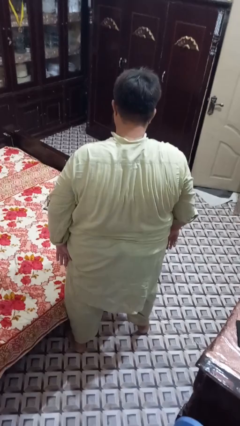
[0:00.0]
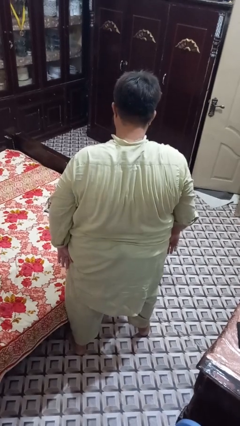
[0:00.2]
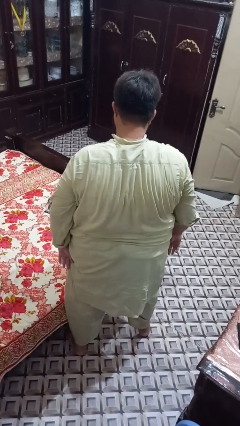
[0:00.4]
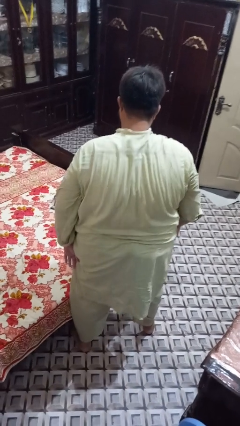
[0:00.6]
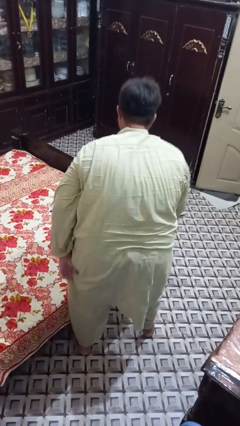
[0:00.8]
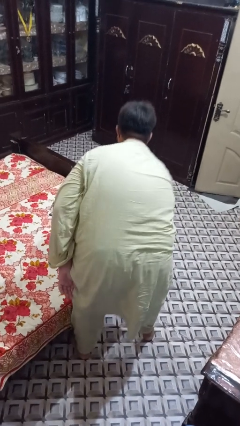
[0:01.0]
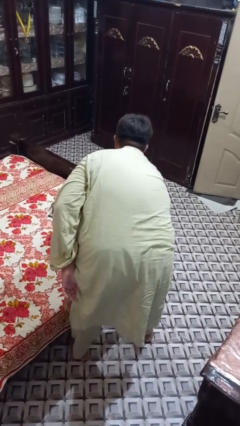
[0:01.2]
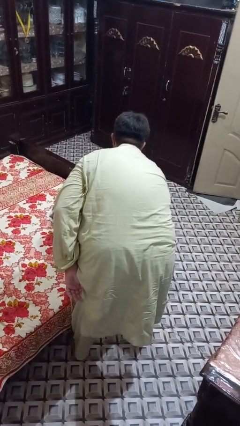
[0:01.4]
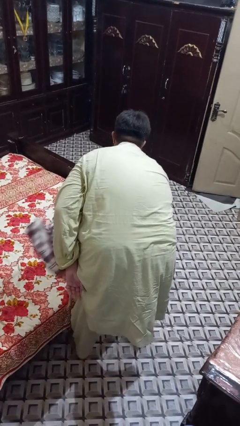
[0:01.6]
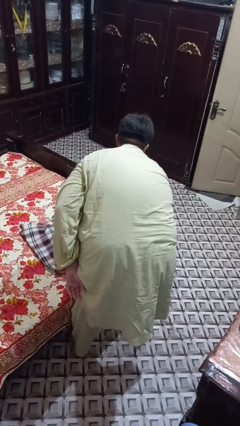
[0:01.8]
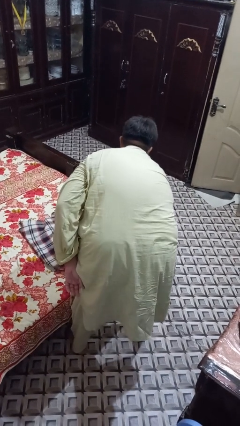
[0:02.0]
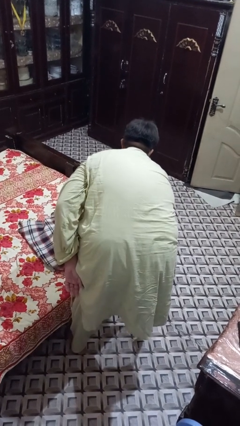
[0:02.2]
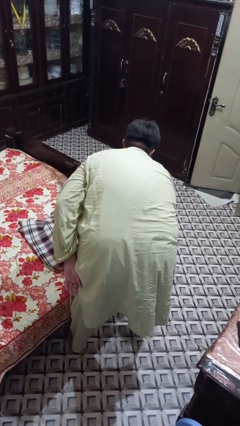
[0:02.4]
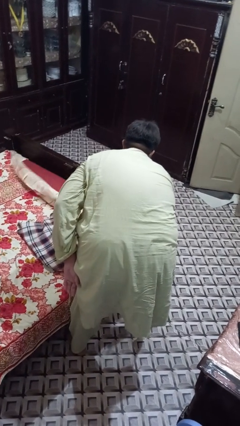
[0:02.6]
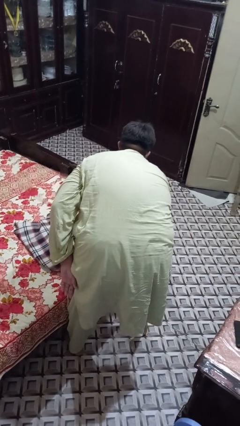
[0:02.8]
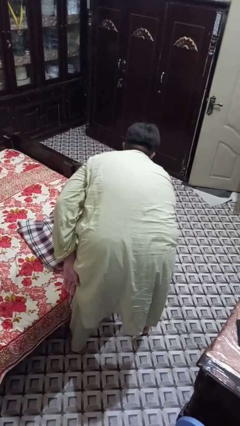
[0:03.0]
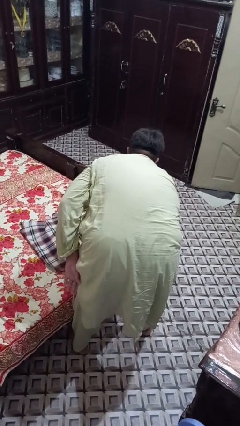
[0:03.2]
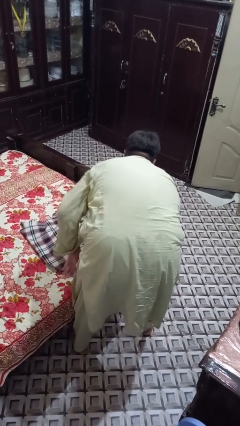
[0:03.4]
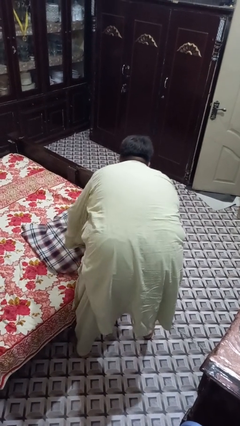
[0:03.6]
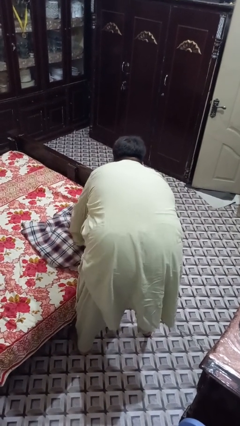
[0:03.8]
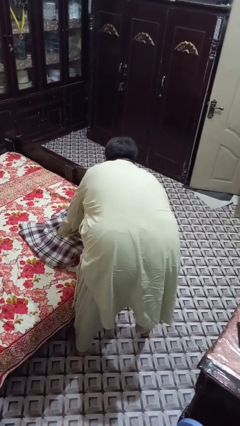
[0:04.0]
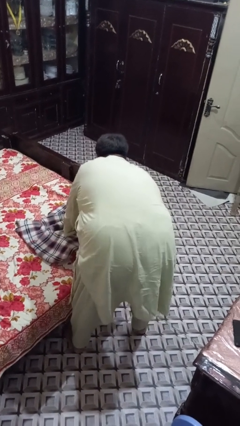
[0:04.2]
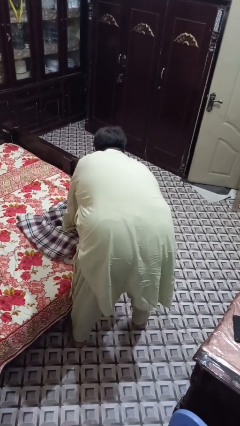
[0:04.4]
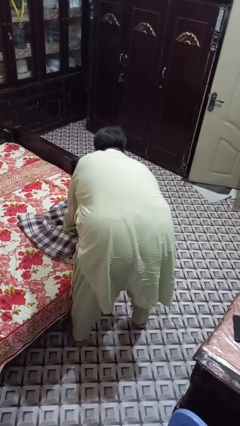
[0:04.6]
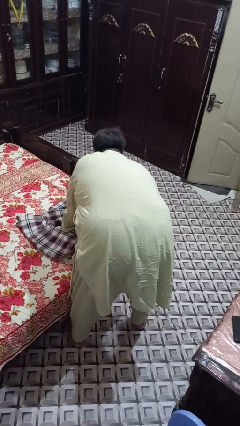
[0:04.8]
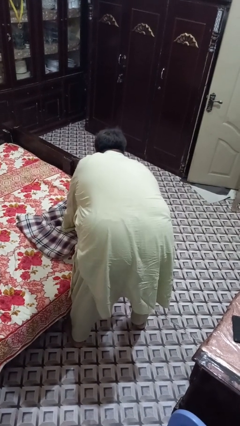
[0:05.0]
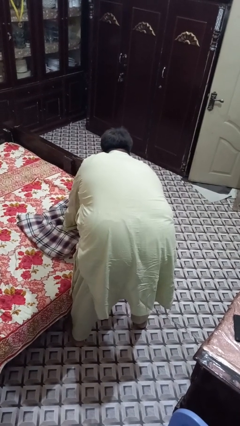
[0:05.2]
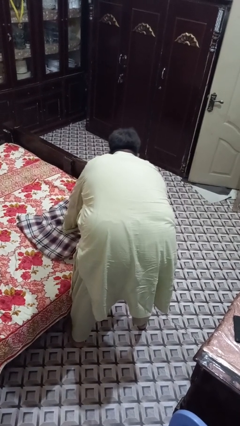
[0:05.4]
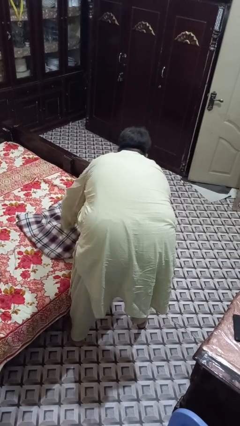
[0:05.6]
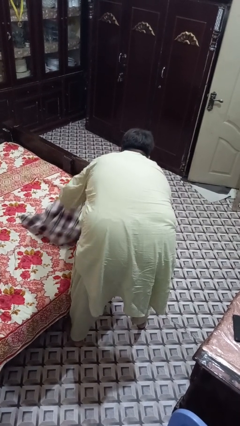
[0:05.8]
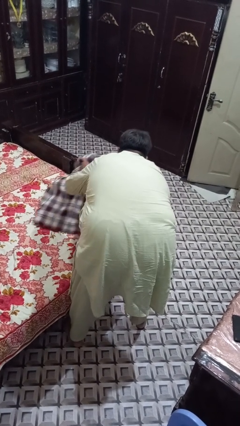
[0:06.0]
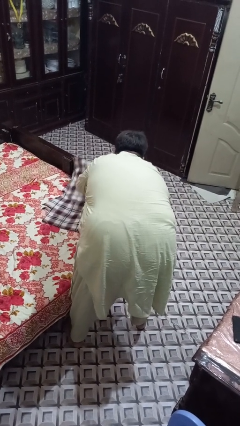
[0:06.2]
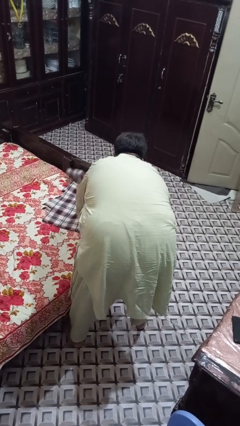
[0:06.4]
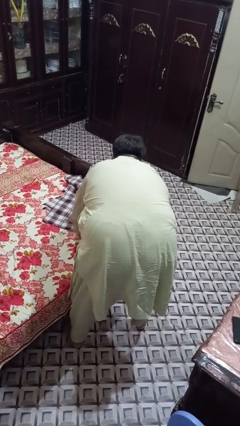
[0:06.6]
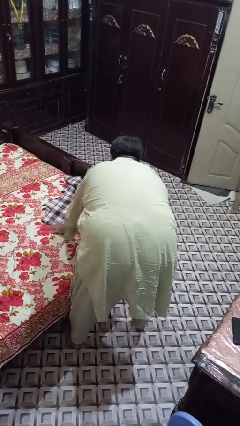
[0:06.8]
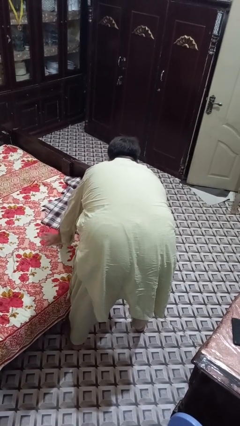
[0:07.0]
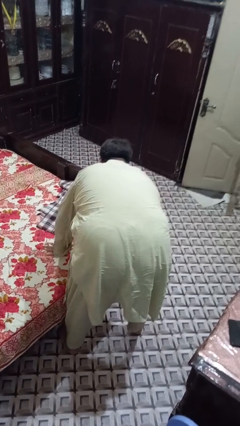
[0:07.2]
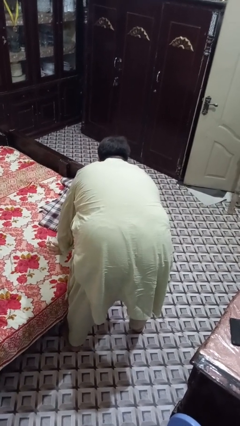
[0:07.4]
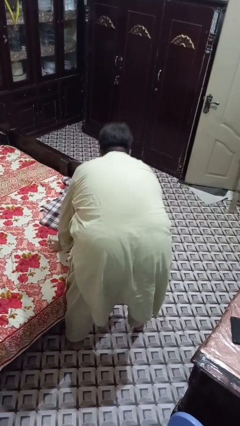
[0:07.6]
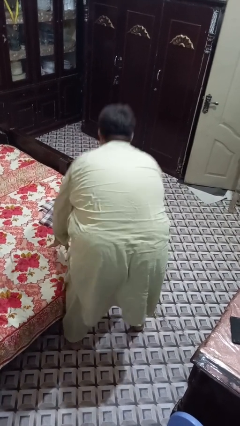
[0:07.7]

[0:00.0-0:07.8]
person makes bed

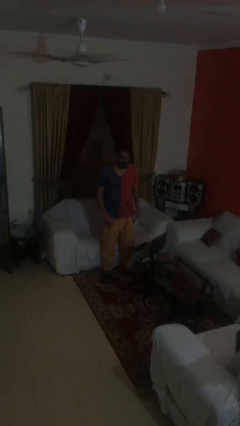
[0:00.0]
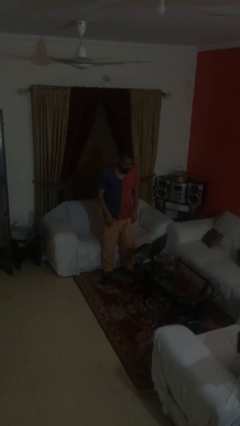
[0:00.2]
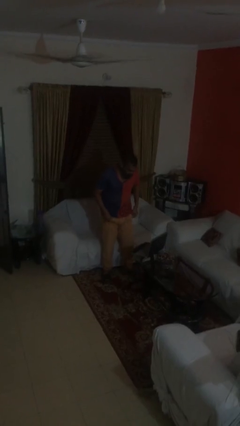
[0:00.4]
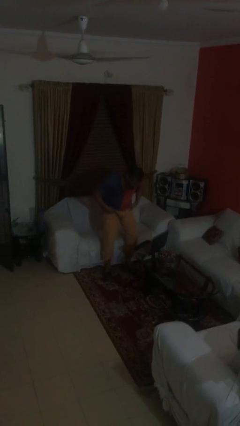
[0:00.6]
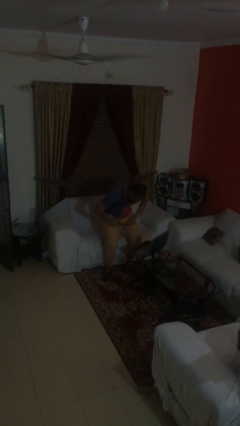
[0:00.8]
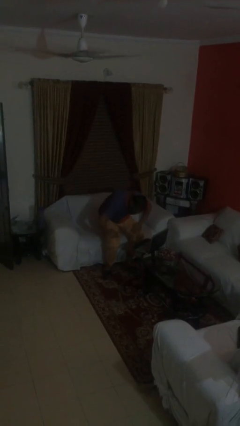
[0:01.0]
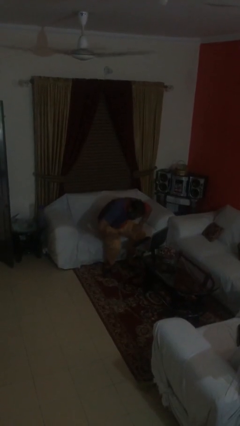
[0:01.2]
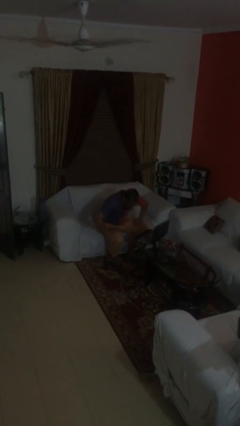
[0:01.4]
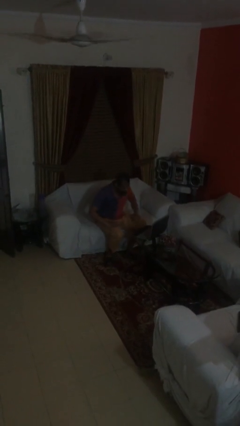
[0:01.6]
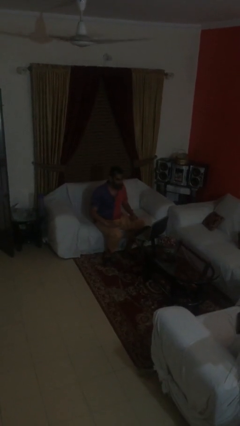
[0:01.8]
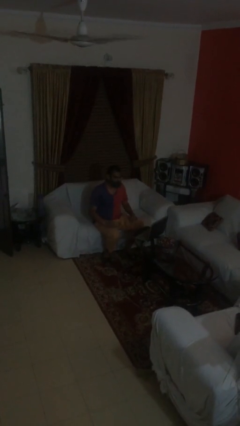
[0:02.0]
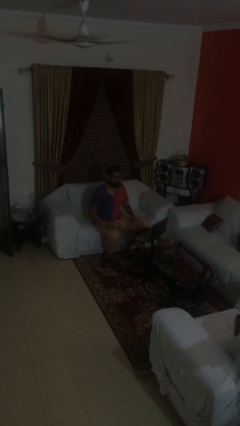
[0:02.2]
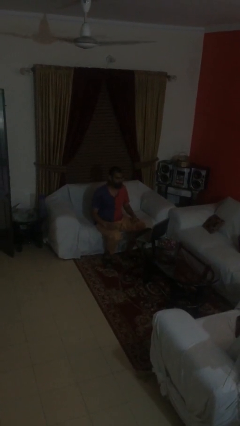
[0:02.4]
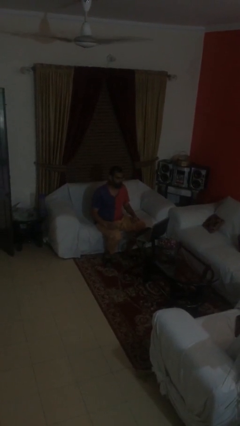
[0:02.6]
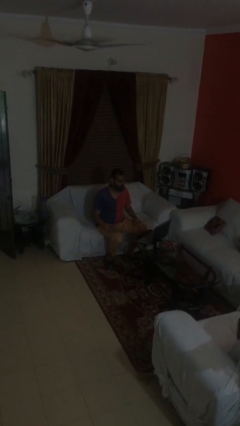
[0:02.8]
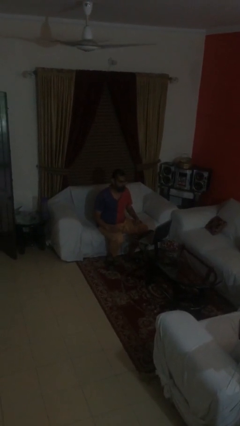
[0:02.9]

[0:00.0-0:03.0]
person sits down

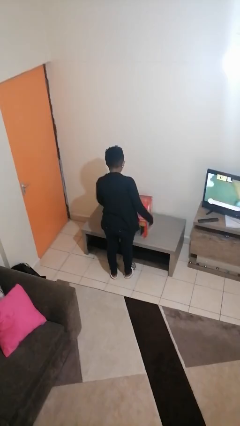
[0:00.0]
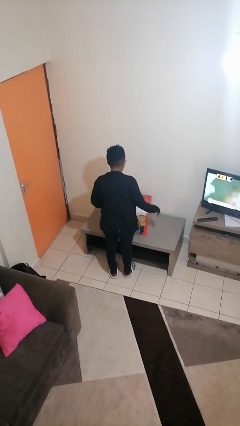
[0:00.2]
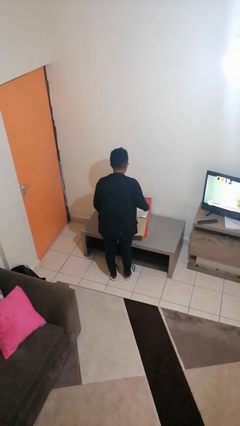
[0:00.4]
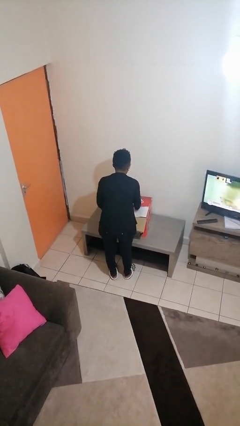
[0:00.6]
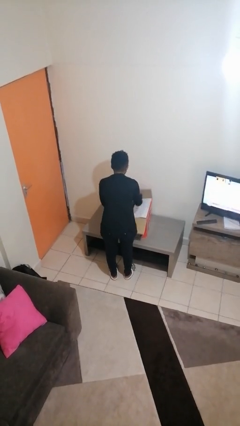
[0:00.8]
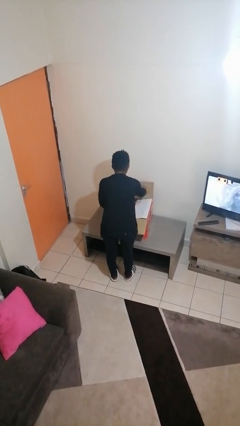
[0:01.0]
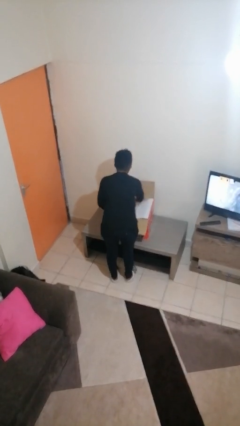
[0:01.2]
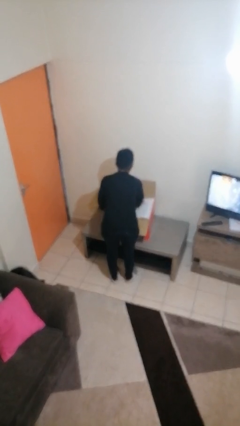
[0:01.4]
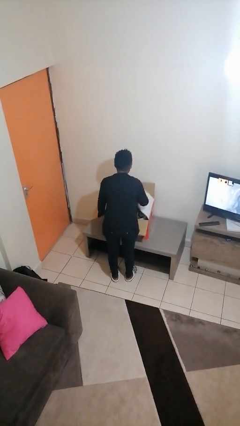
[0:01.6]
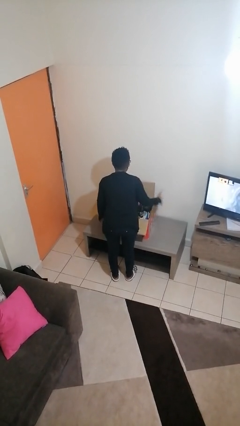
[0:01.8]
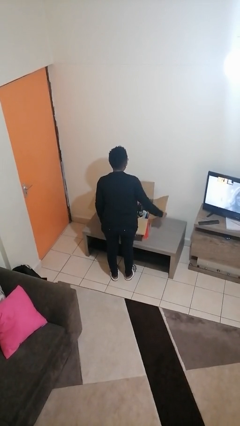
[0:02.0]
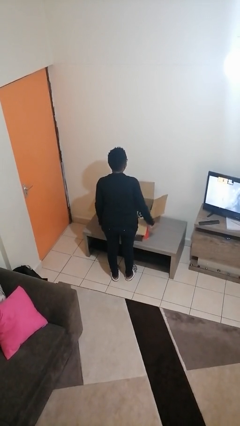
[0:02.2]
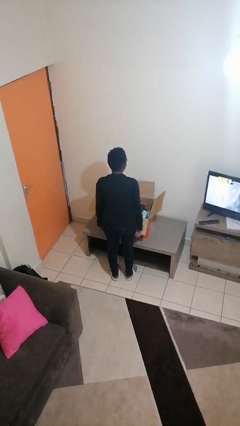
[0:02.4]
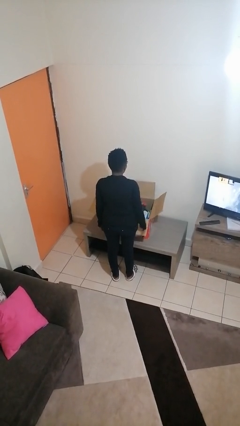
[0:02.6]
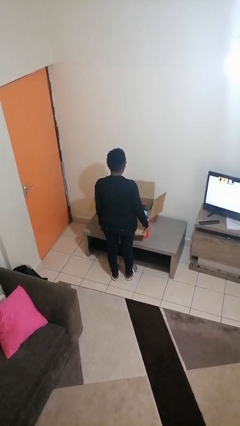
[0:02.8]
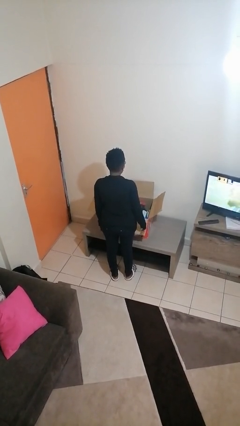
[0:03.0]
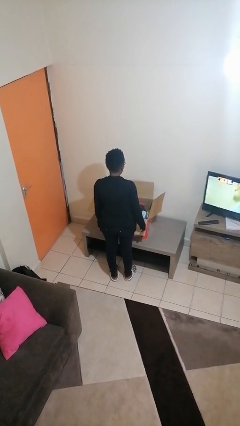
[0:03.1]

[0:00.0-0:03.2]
person opens box

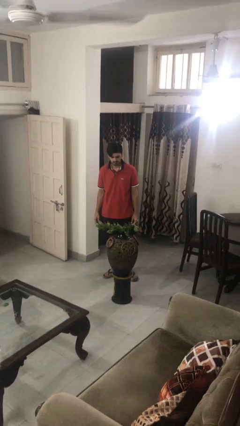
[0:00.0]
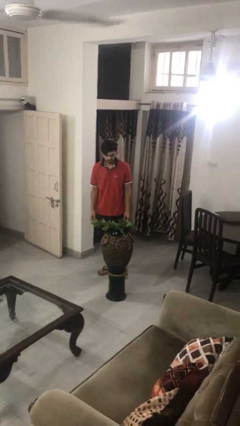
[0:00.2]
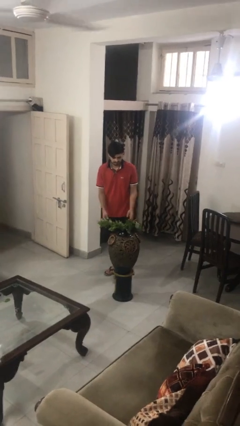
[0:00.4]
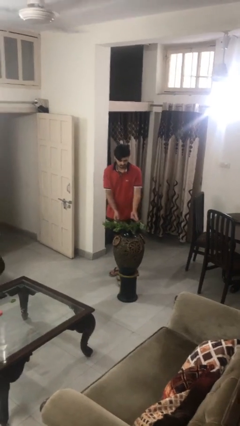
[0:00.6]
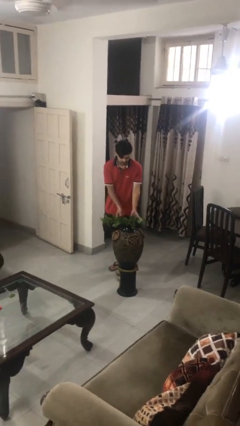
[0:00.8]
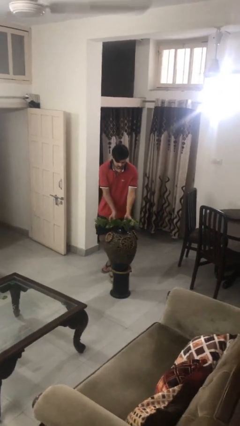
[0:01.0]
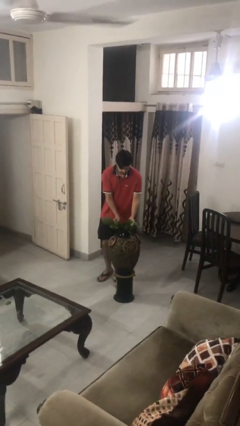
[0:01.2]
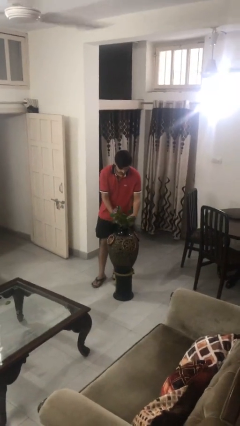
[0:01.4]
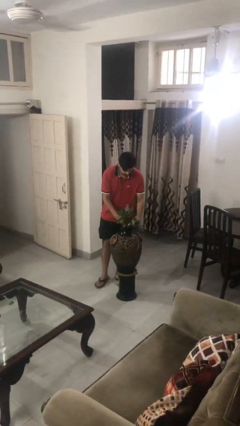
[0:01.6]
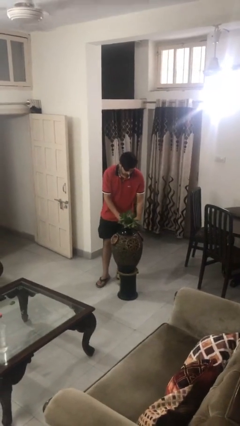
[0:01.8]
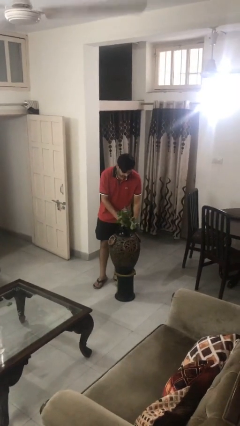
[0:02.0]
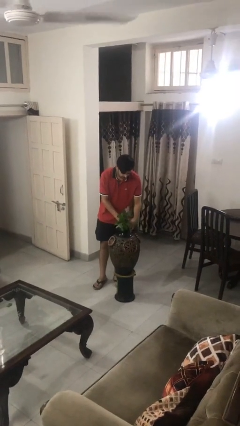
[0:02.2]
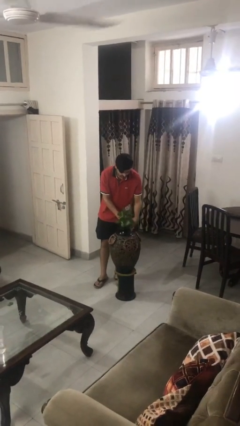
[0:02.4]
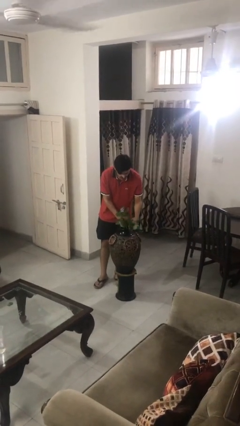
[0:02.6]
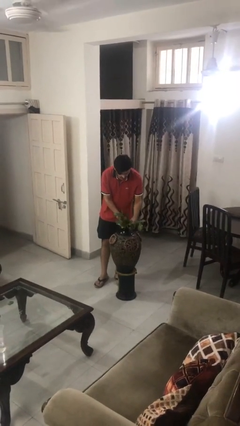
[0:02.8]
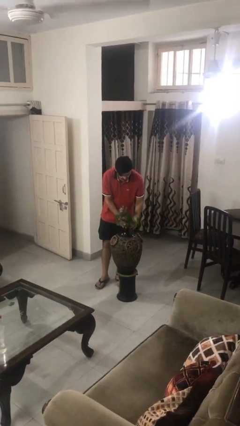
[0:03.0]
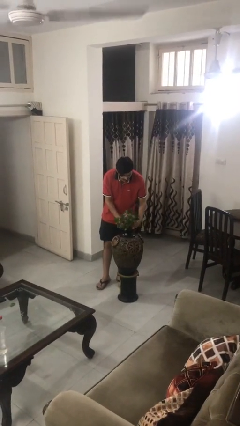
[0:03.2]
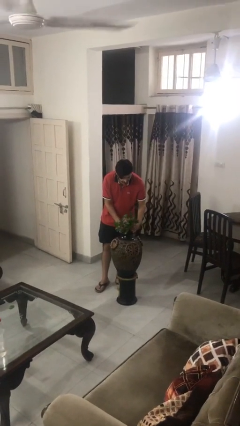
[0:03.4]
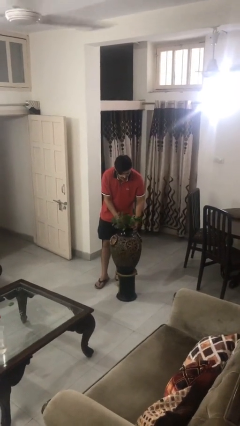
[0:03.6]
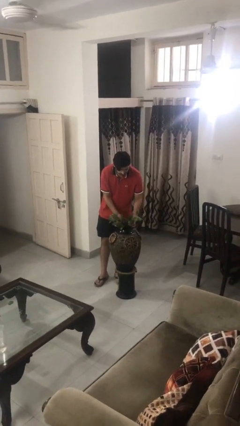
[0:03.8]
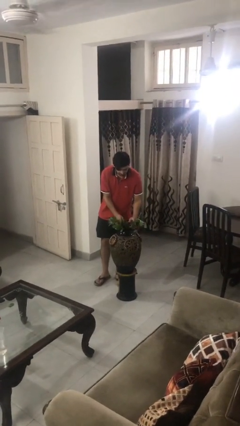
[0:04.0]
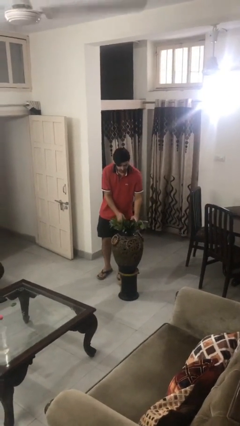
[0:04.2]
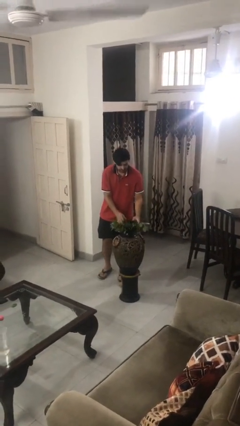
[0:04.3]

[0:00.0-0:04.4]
person arranges flowers in vase
